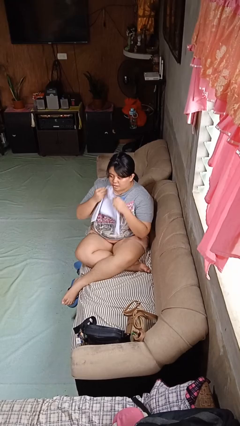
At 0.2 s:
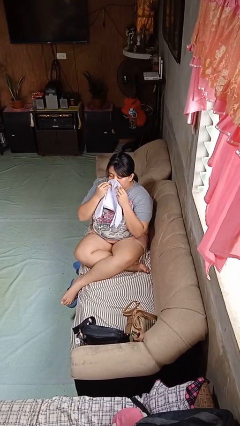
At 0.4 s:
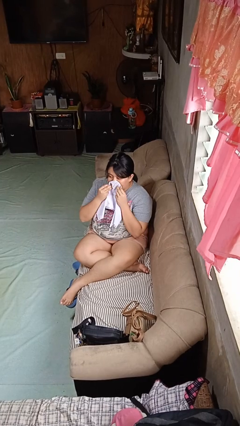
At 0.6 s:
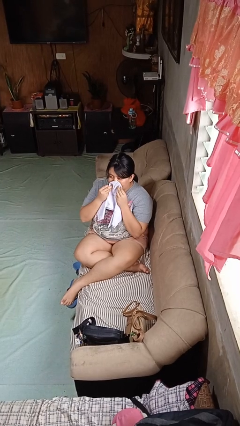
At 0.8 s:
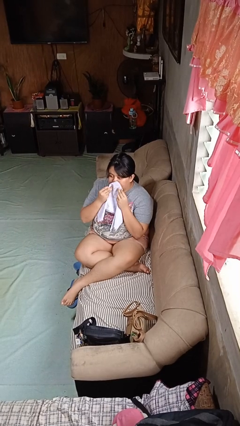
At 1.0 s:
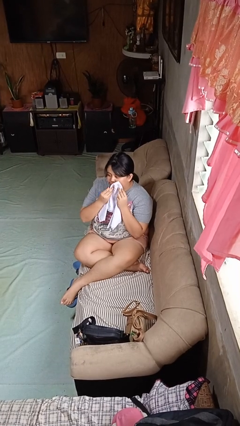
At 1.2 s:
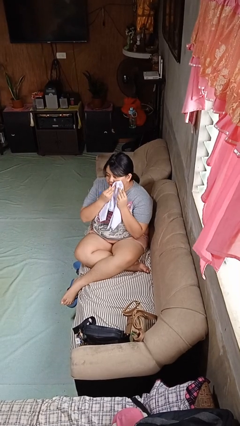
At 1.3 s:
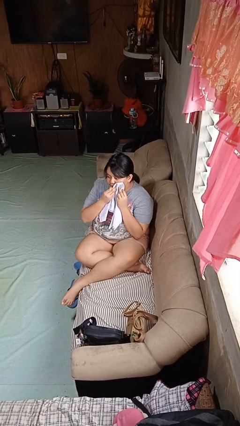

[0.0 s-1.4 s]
person wipes mouth with napkin

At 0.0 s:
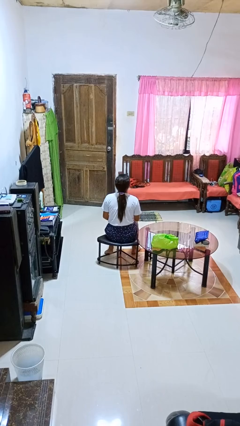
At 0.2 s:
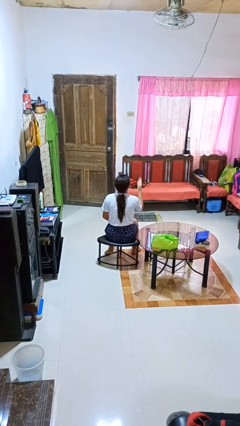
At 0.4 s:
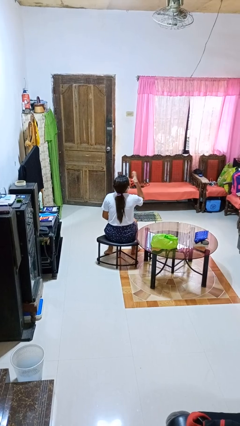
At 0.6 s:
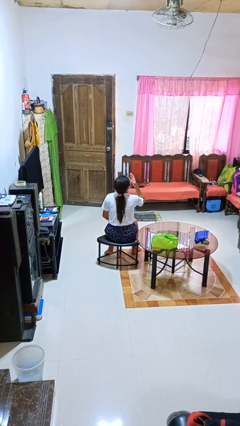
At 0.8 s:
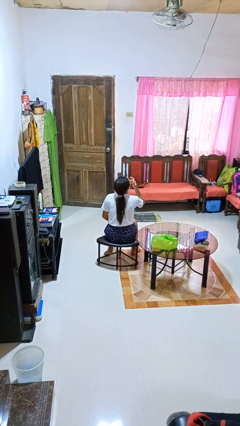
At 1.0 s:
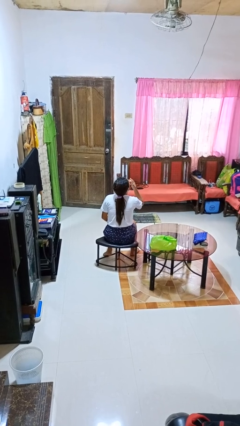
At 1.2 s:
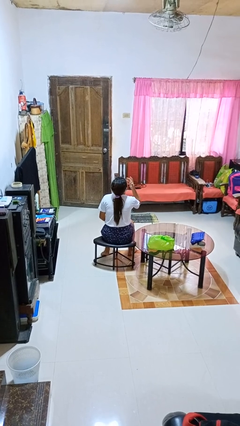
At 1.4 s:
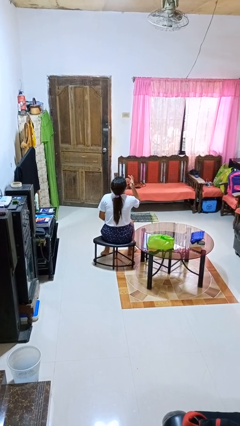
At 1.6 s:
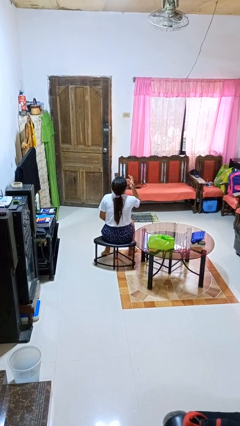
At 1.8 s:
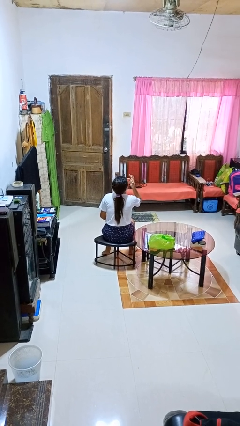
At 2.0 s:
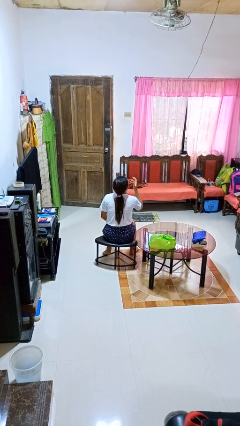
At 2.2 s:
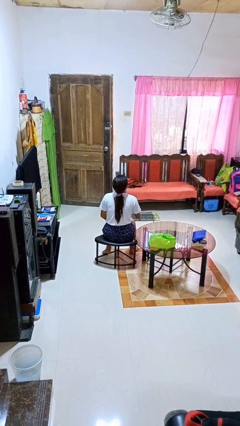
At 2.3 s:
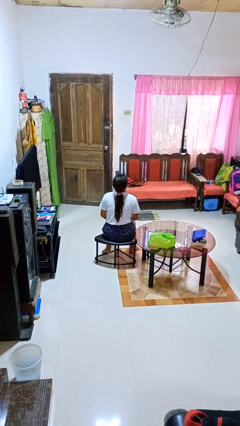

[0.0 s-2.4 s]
person licks fingers

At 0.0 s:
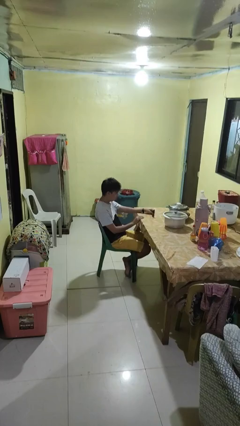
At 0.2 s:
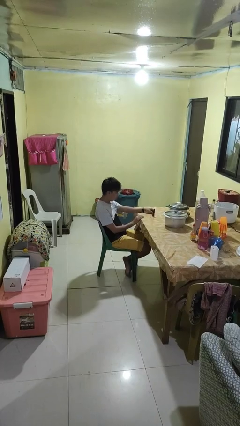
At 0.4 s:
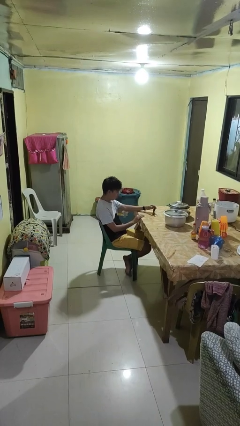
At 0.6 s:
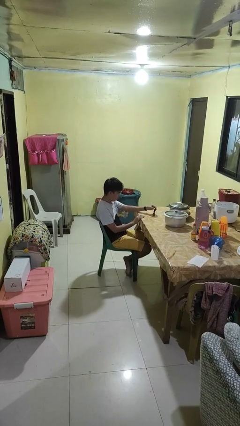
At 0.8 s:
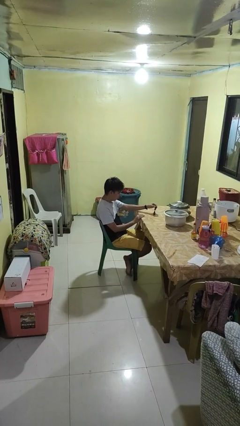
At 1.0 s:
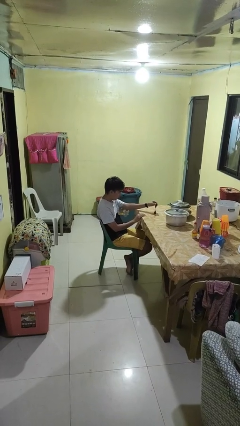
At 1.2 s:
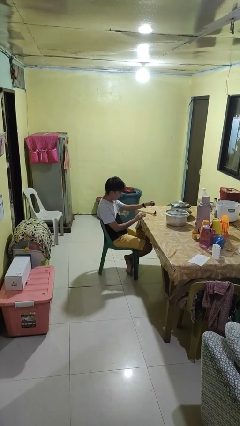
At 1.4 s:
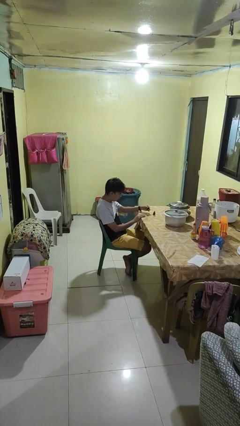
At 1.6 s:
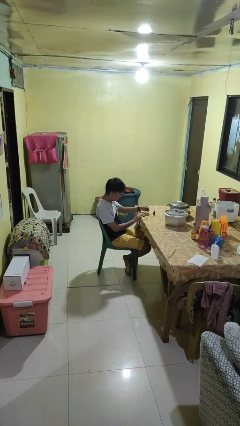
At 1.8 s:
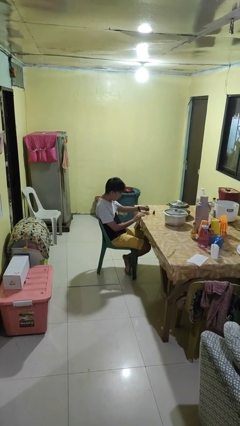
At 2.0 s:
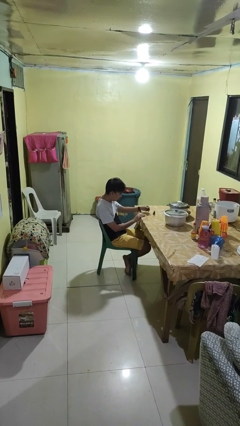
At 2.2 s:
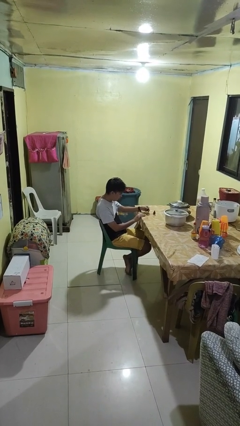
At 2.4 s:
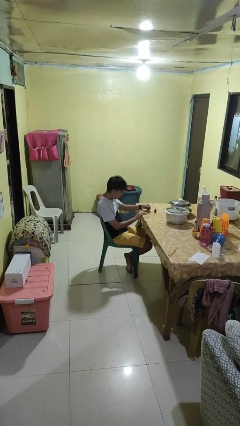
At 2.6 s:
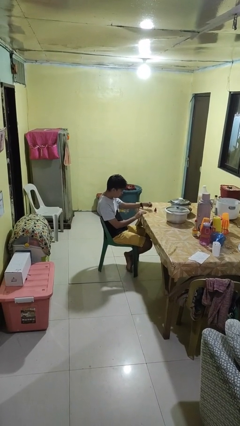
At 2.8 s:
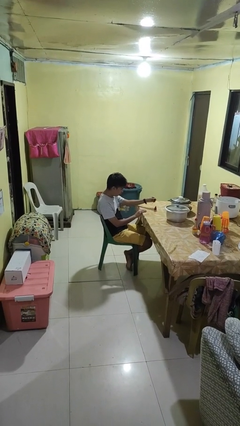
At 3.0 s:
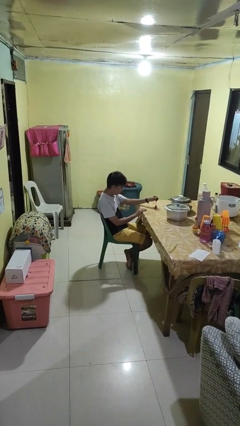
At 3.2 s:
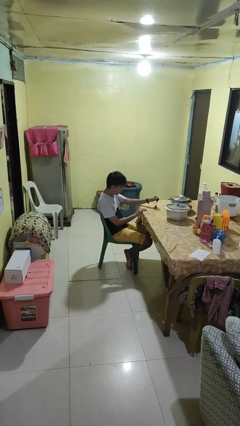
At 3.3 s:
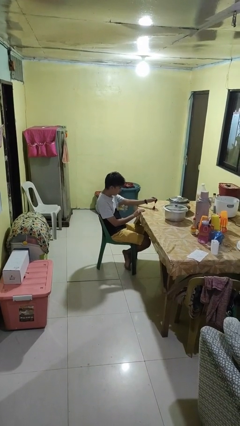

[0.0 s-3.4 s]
person paints fingernails

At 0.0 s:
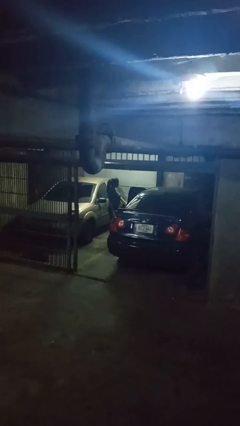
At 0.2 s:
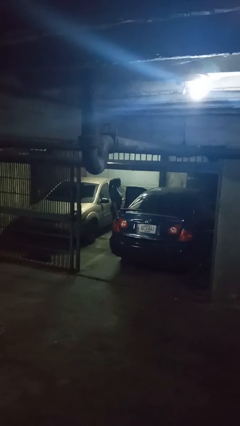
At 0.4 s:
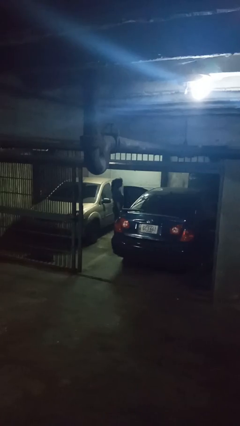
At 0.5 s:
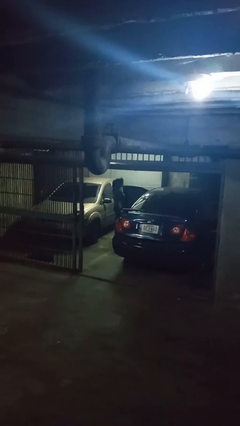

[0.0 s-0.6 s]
person opens car door

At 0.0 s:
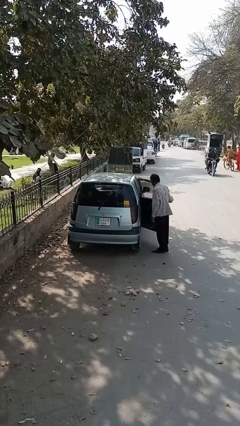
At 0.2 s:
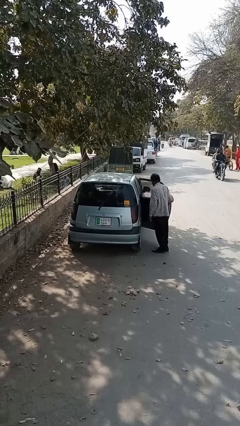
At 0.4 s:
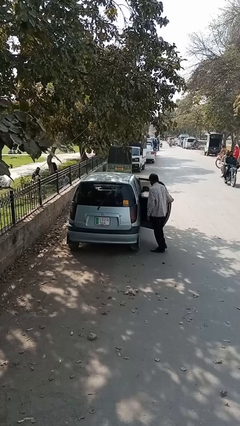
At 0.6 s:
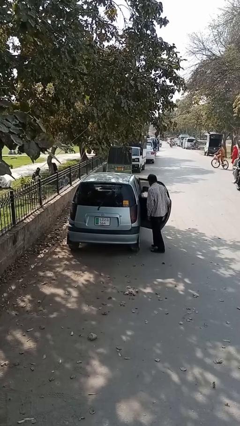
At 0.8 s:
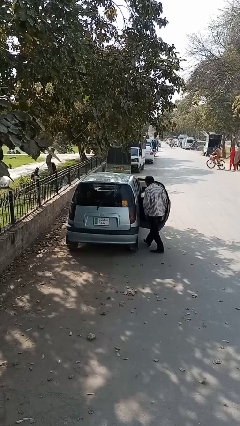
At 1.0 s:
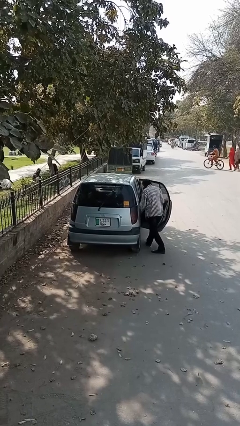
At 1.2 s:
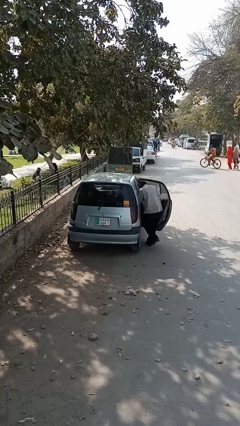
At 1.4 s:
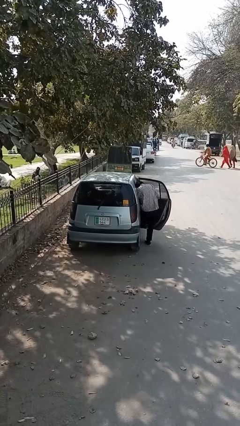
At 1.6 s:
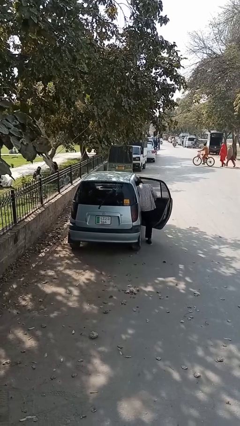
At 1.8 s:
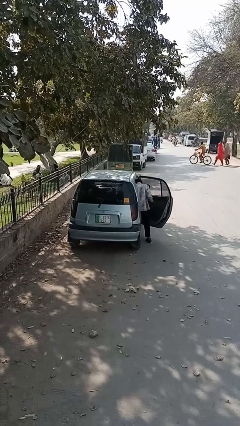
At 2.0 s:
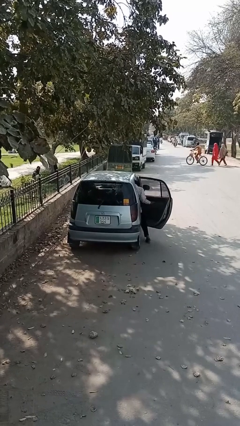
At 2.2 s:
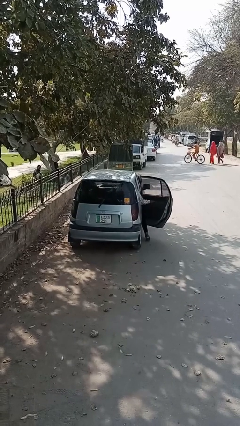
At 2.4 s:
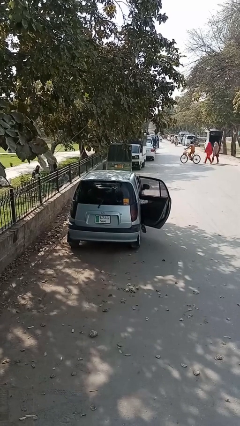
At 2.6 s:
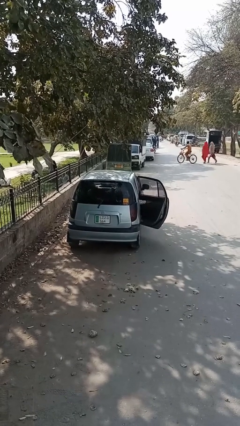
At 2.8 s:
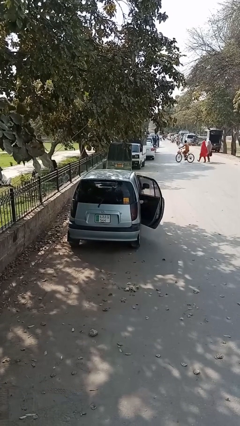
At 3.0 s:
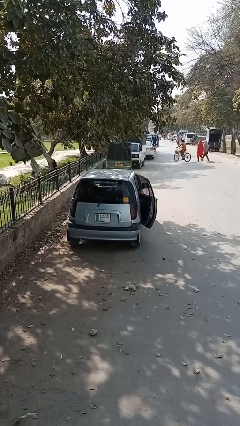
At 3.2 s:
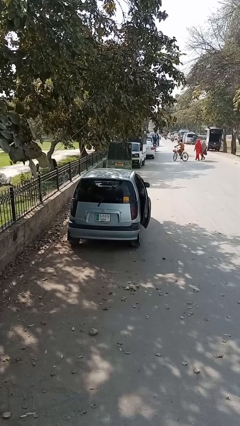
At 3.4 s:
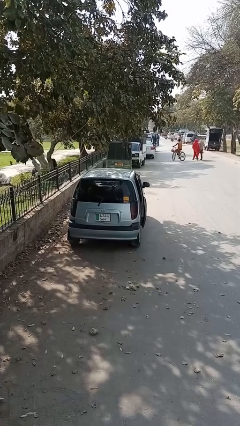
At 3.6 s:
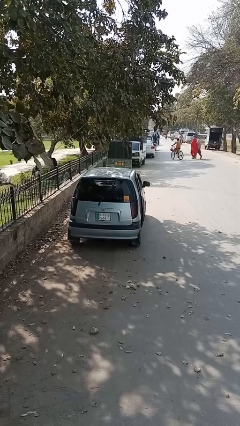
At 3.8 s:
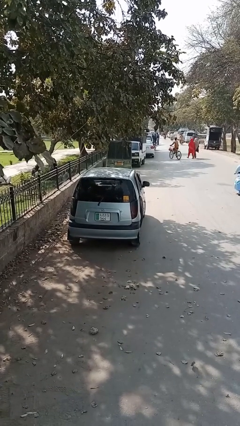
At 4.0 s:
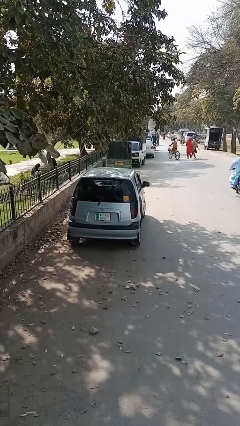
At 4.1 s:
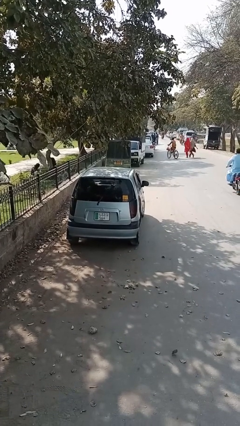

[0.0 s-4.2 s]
car picks up person

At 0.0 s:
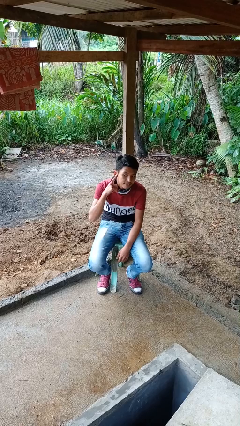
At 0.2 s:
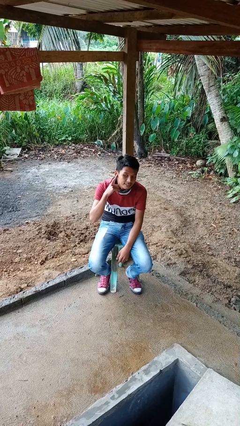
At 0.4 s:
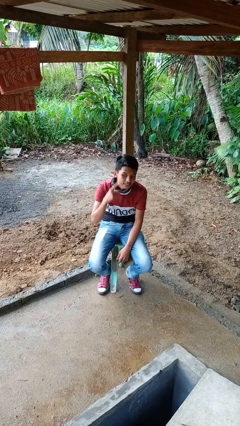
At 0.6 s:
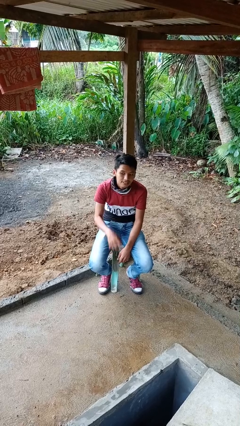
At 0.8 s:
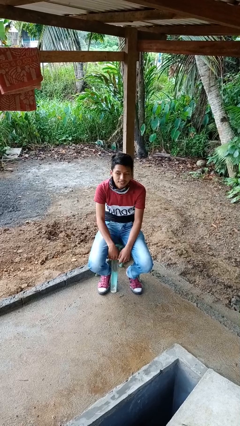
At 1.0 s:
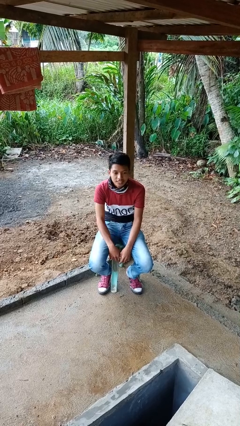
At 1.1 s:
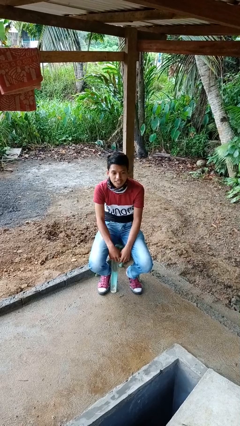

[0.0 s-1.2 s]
person gestures listen closely

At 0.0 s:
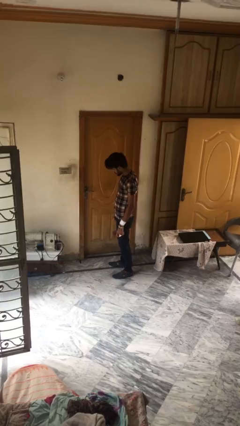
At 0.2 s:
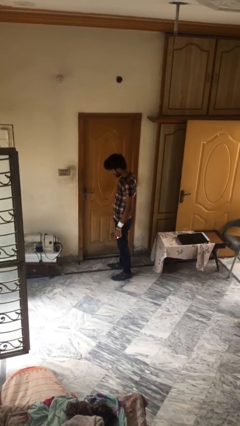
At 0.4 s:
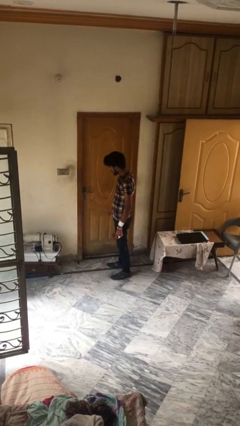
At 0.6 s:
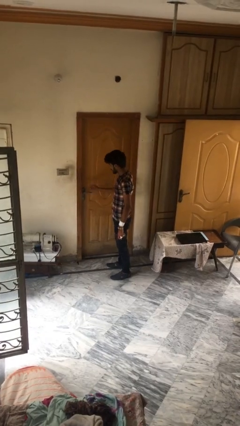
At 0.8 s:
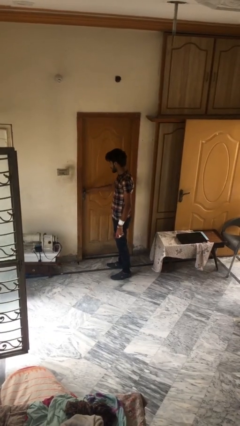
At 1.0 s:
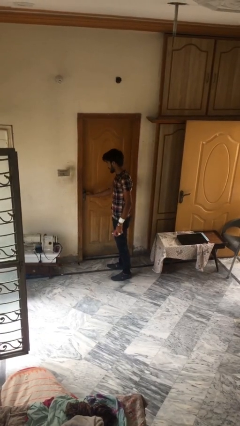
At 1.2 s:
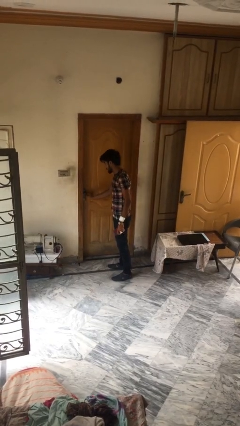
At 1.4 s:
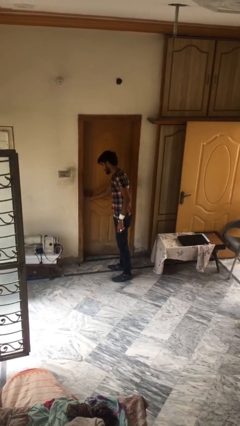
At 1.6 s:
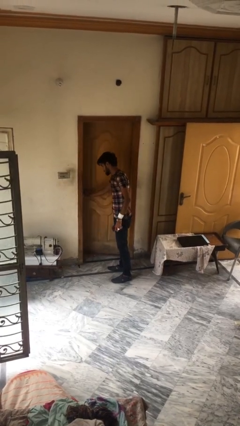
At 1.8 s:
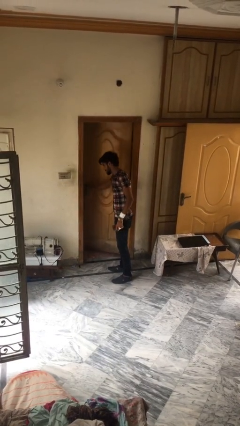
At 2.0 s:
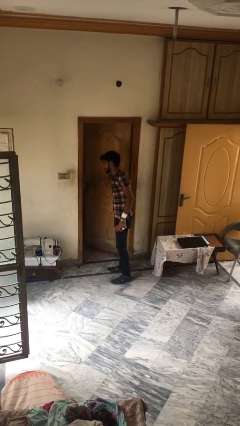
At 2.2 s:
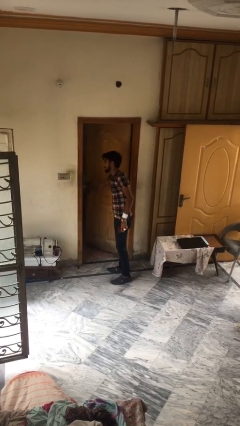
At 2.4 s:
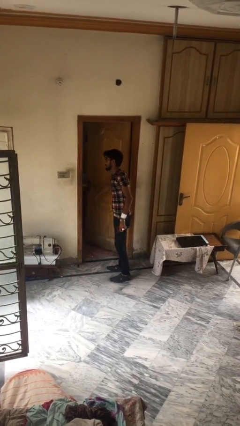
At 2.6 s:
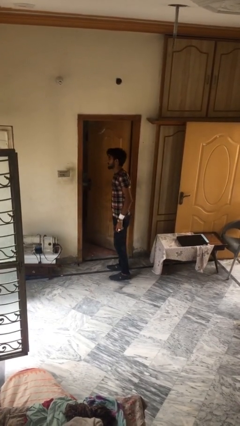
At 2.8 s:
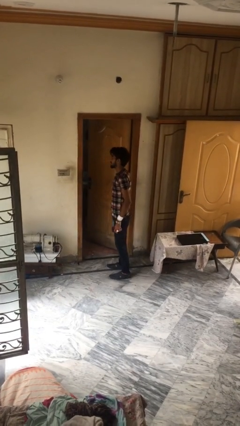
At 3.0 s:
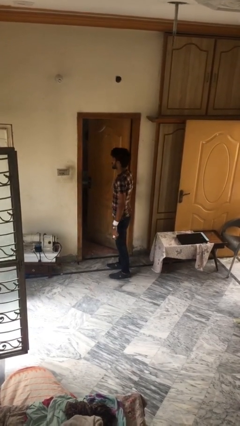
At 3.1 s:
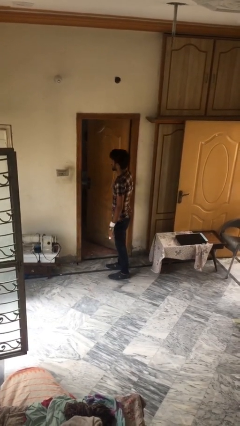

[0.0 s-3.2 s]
person opens facility door

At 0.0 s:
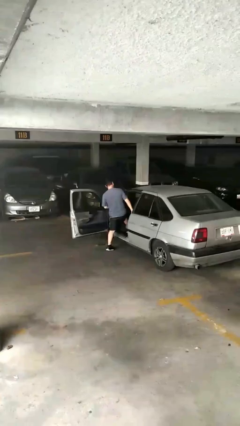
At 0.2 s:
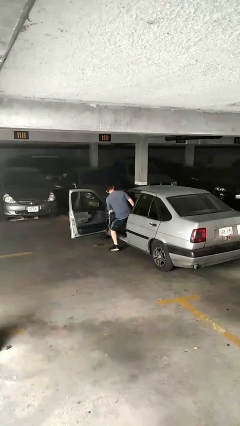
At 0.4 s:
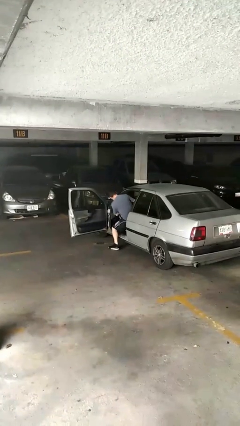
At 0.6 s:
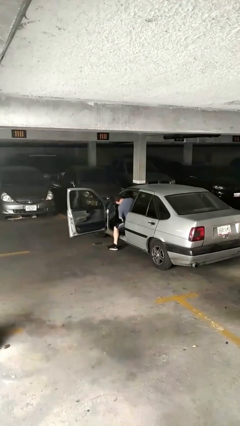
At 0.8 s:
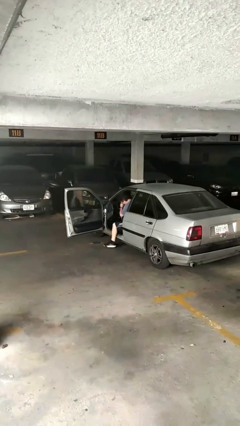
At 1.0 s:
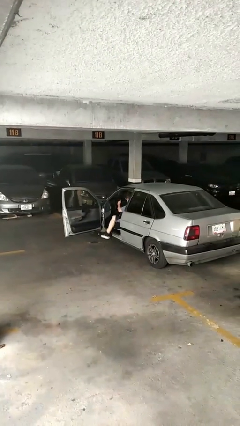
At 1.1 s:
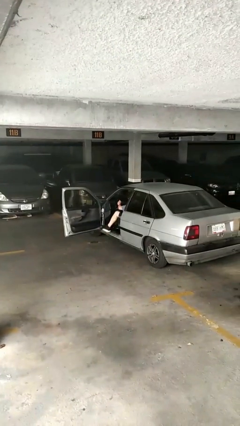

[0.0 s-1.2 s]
person enters car
